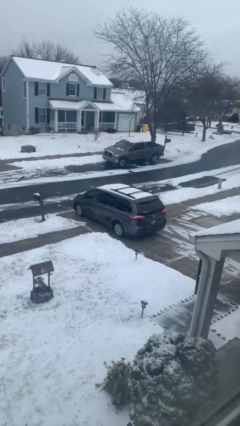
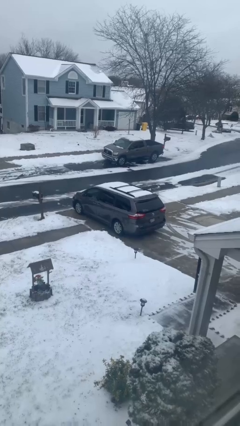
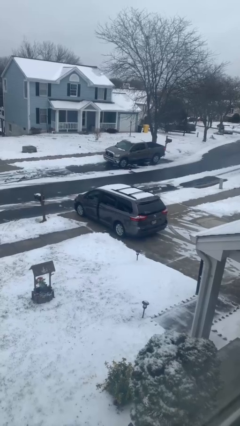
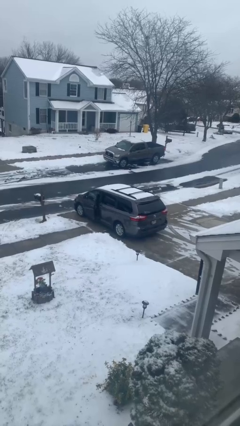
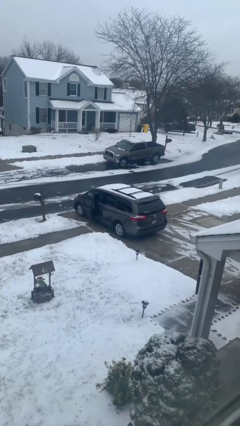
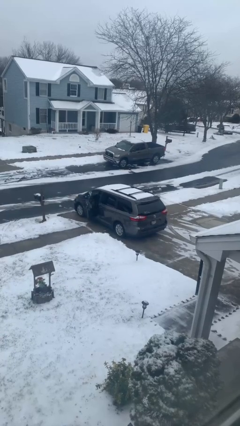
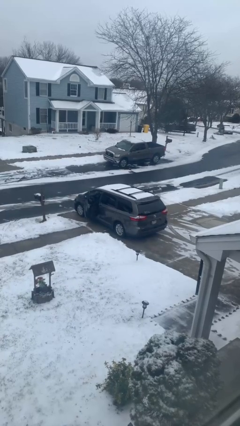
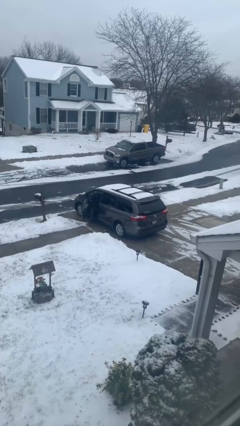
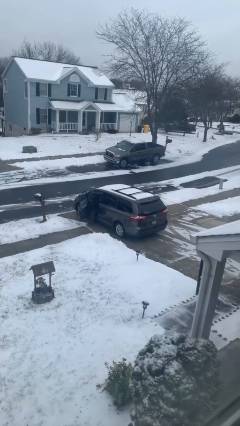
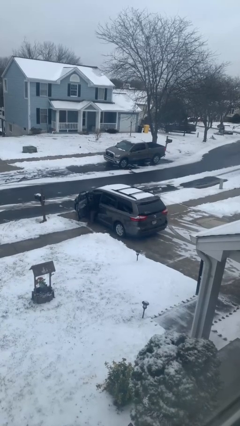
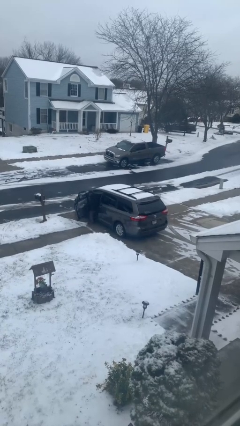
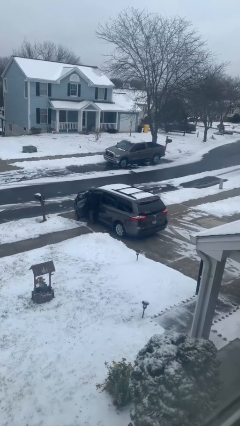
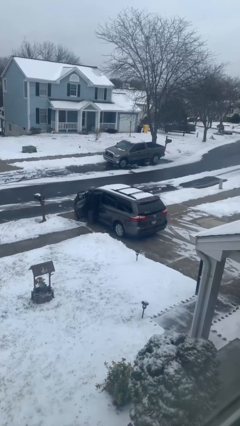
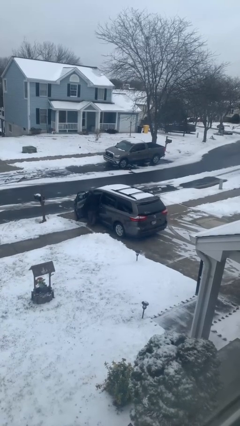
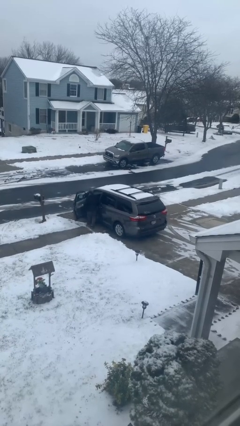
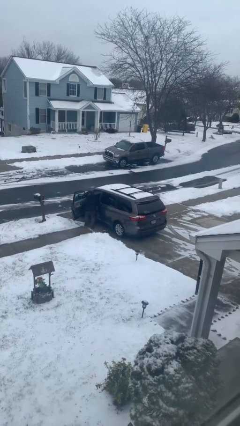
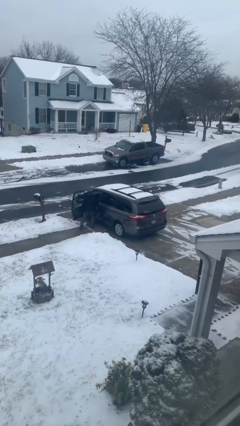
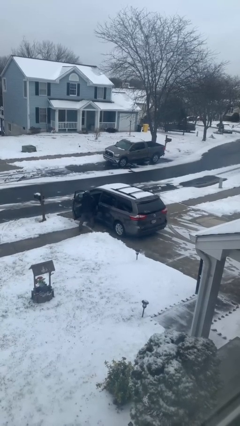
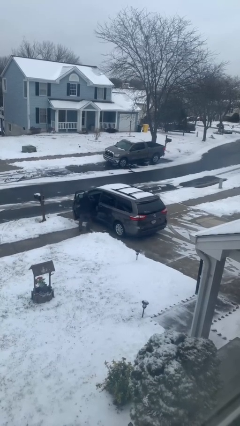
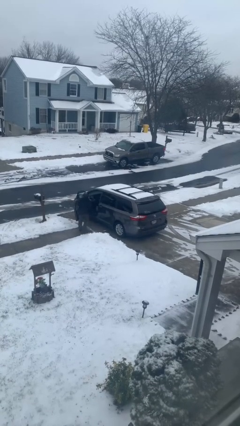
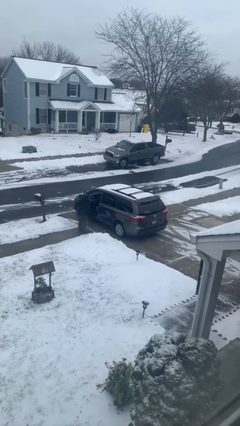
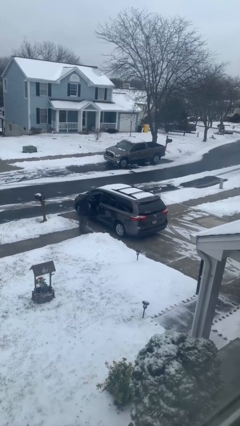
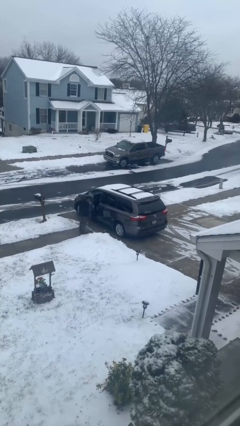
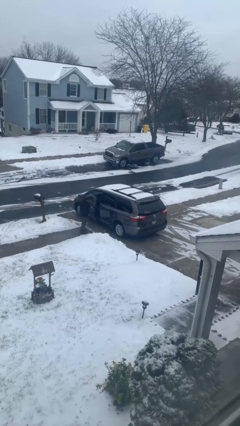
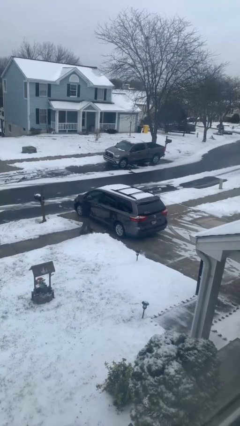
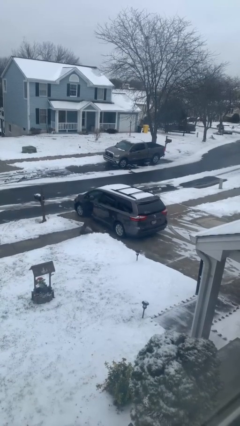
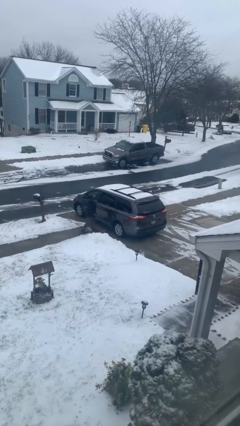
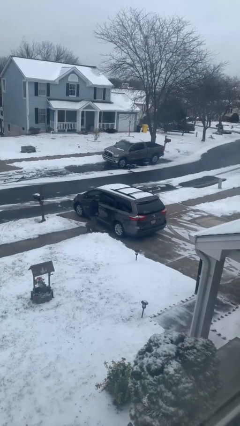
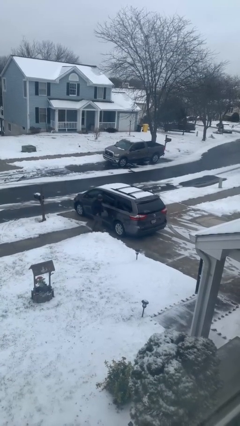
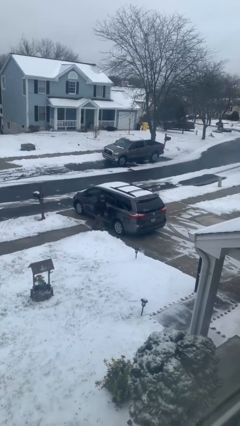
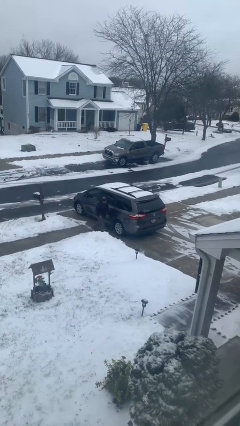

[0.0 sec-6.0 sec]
car drops off person

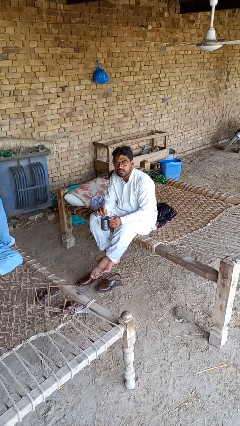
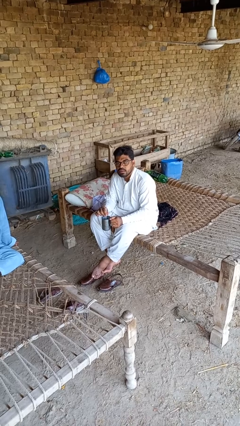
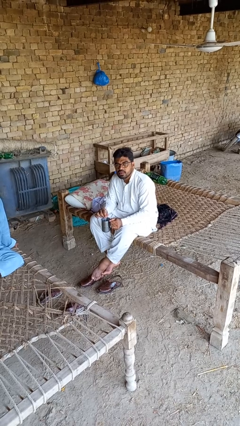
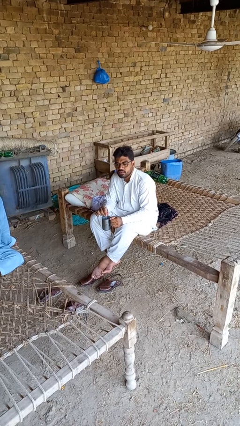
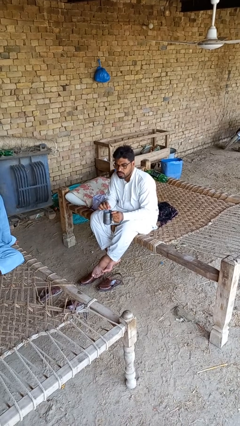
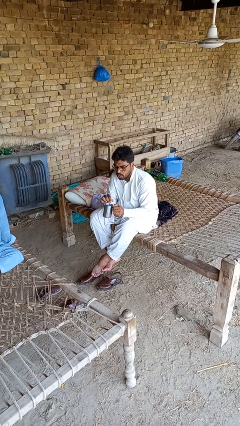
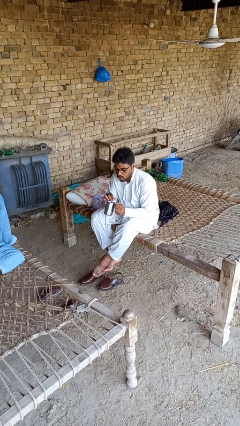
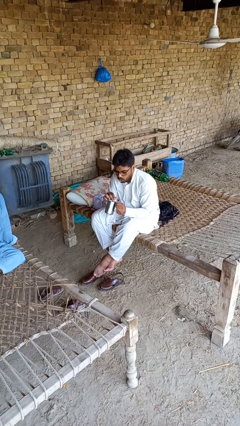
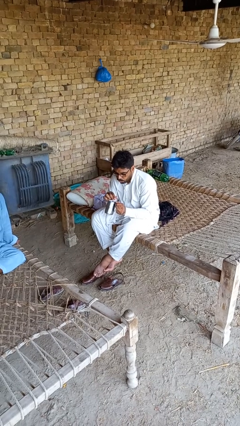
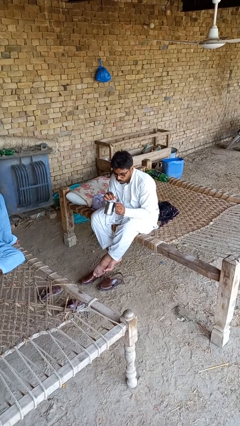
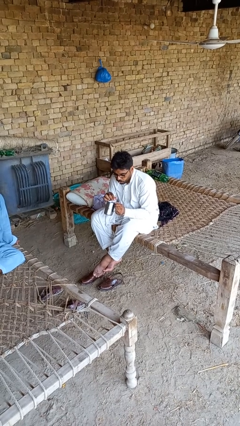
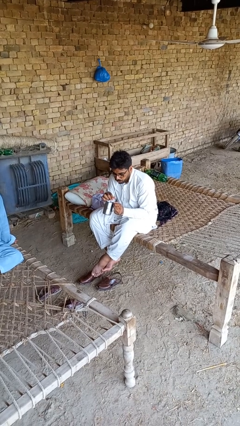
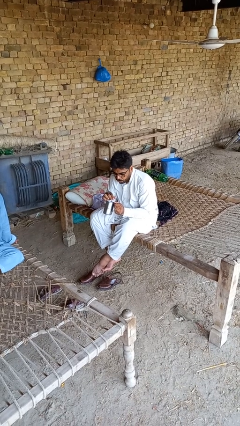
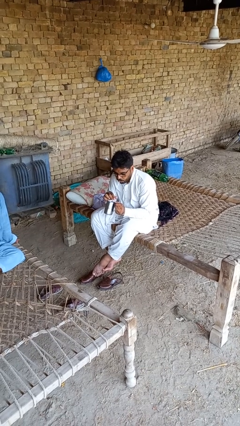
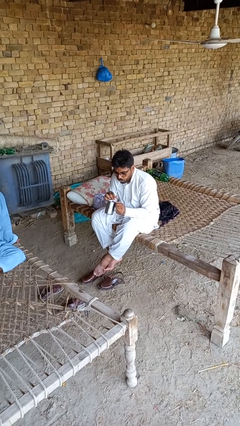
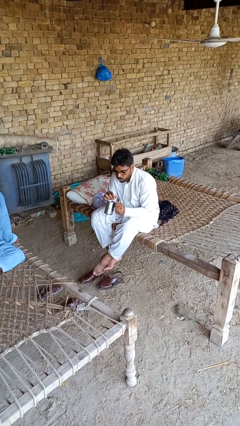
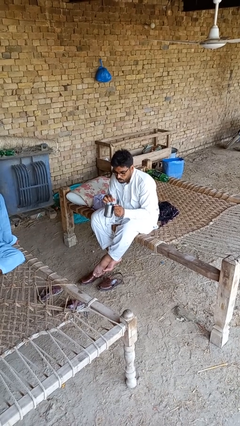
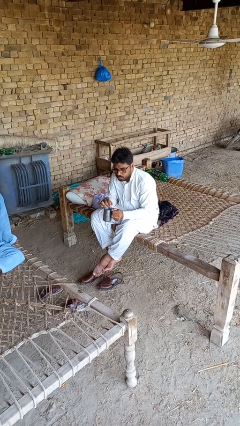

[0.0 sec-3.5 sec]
person drinks from straw

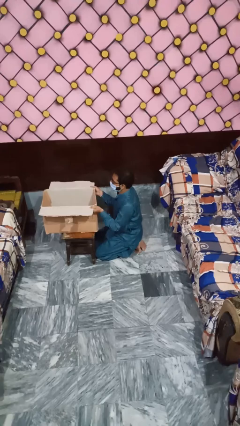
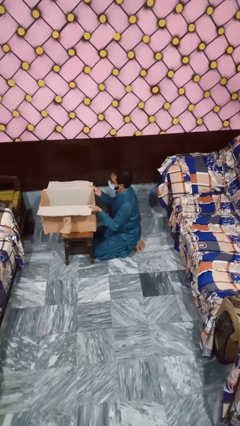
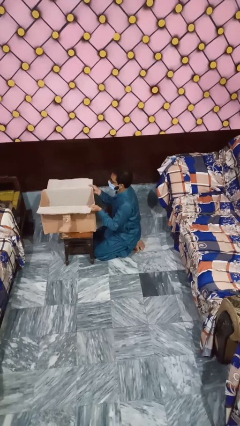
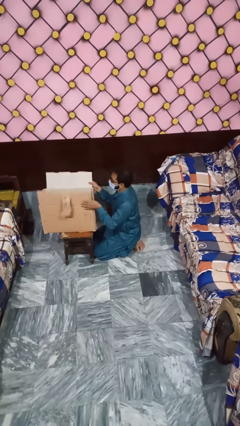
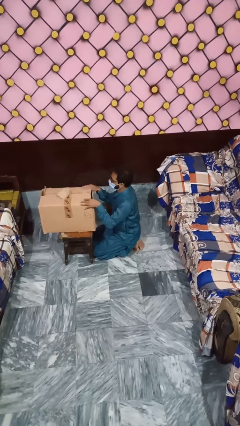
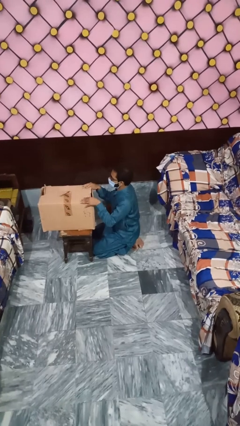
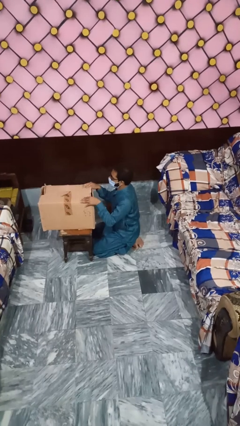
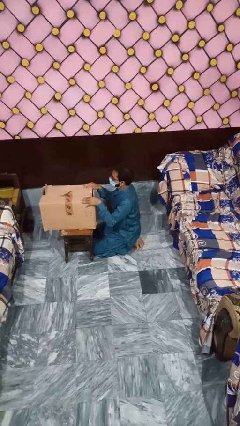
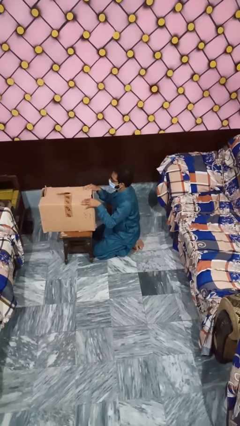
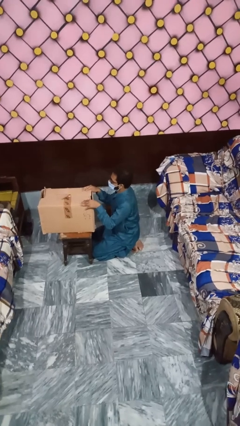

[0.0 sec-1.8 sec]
person closes box

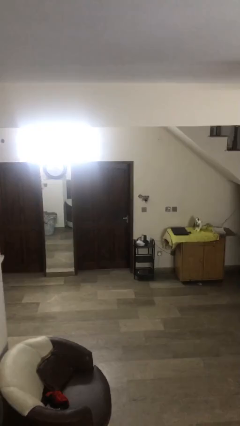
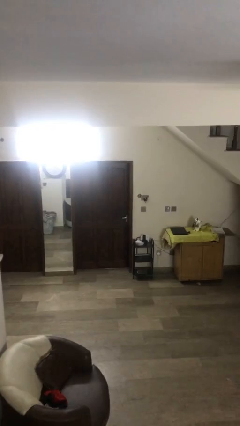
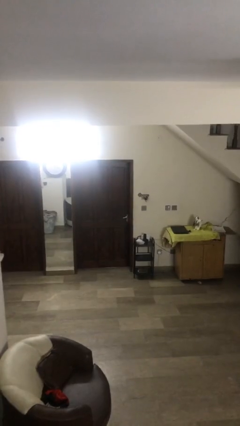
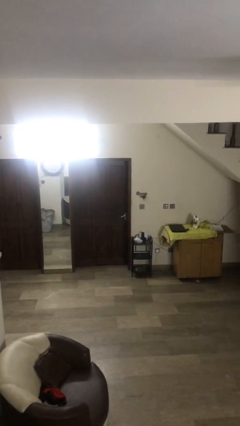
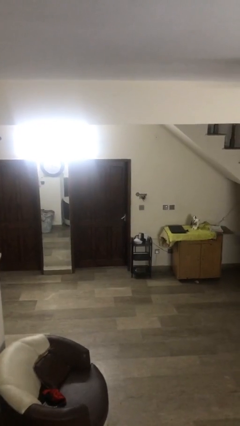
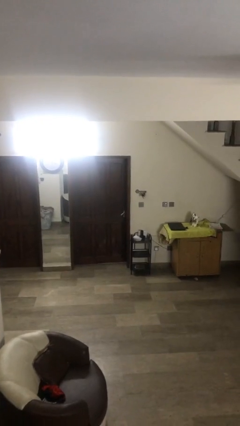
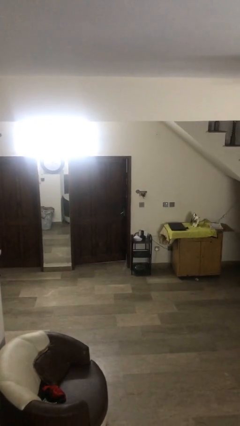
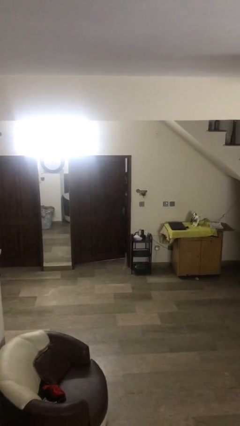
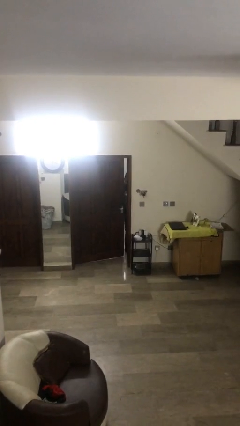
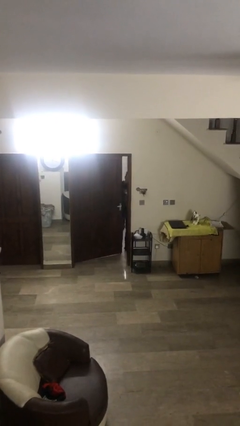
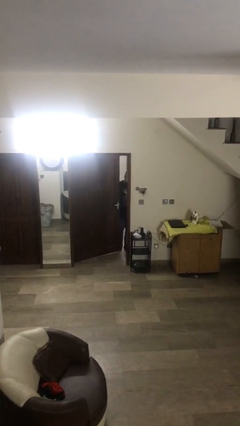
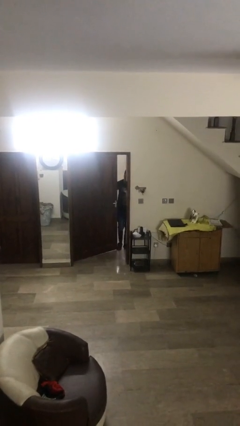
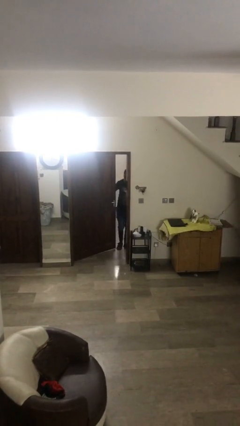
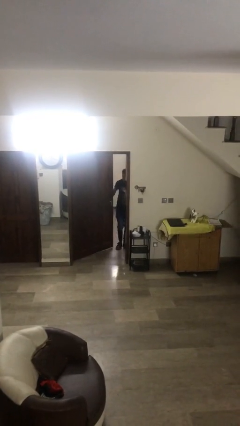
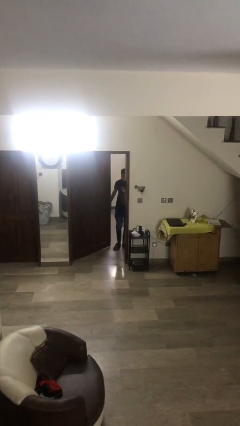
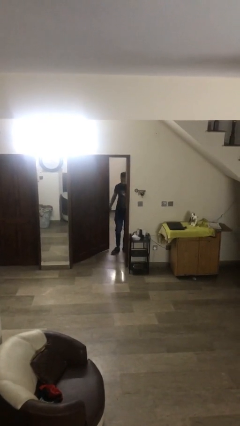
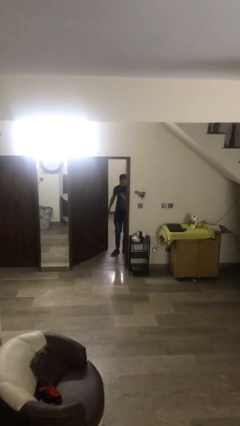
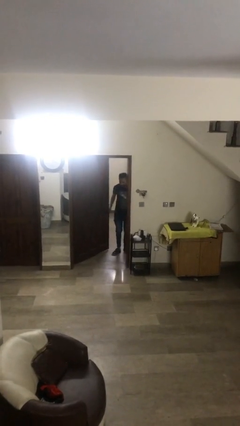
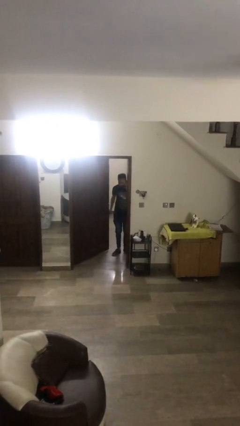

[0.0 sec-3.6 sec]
person opens facility door

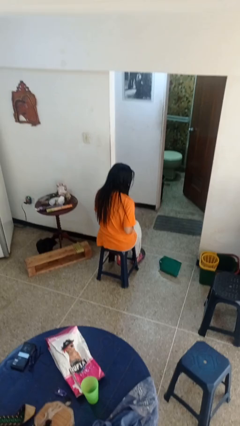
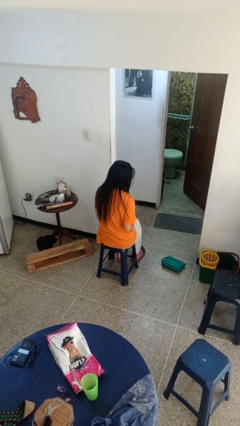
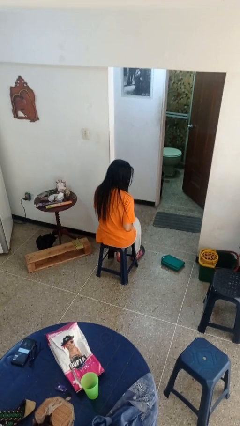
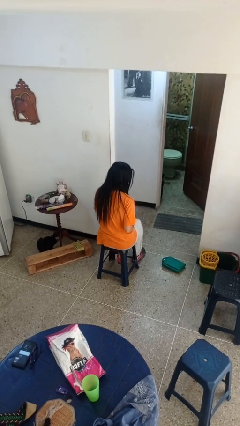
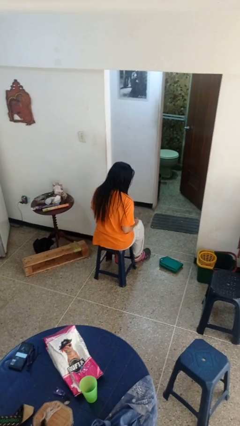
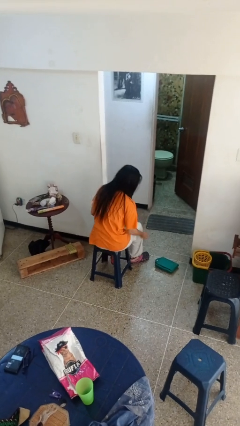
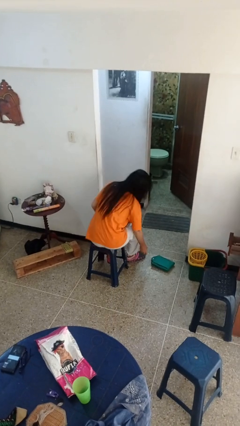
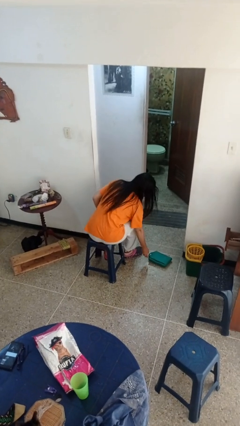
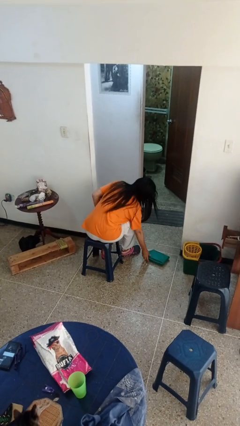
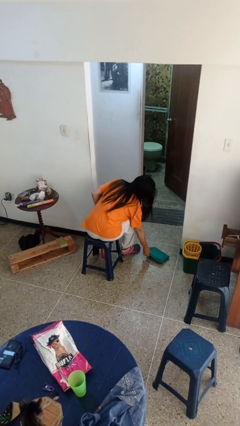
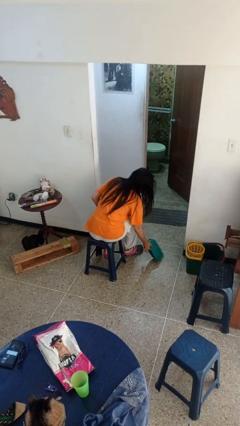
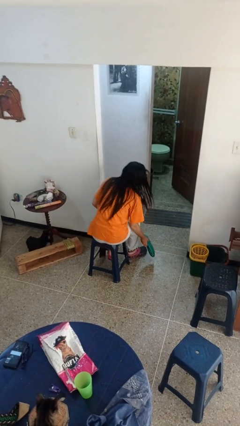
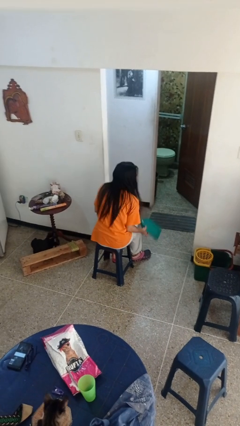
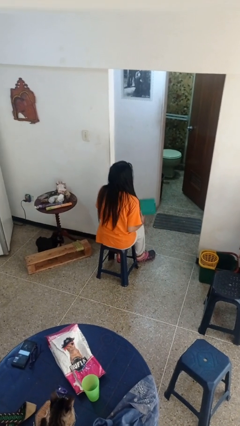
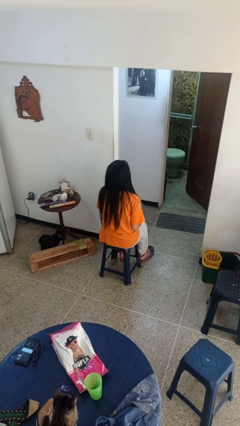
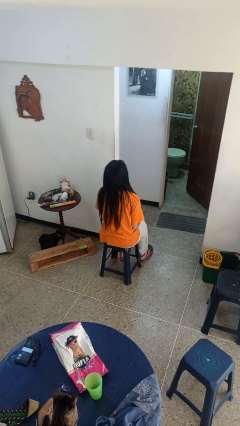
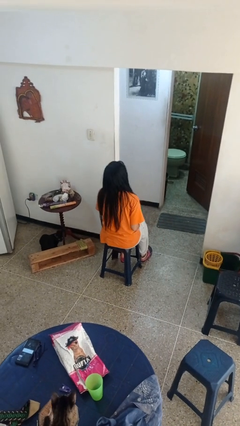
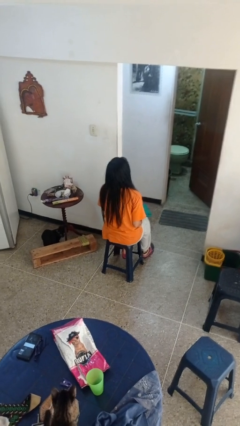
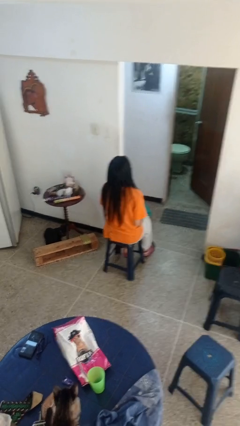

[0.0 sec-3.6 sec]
person picks up object from floor
